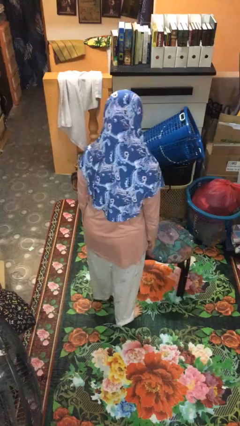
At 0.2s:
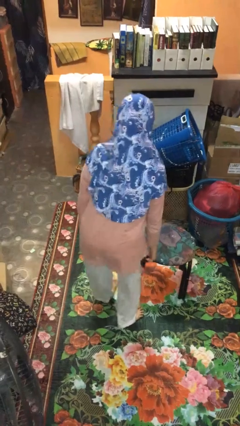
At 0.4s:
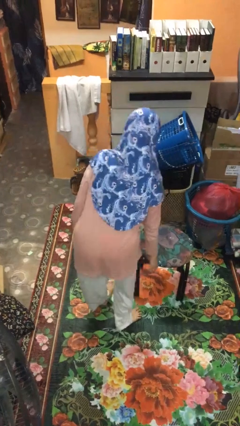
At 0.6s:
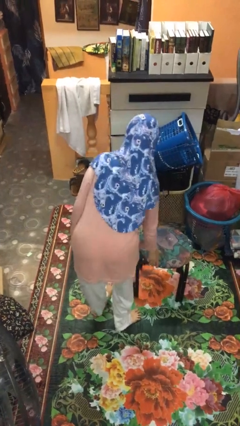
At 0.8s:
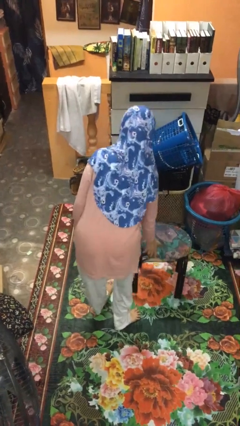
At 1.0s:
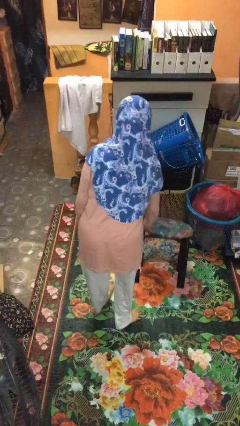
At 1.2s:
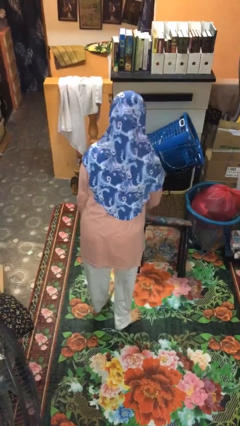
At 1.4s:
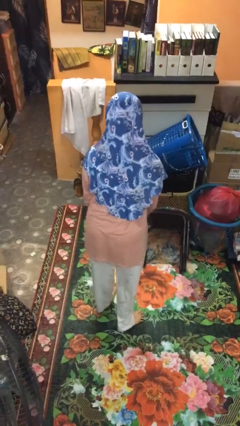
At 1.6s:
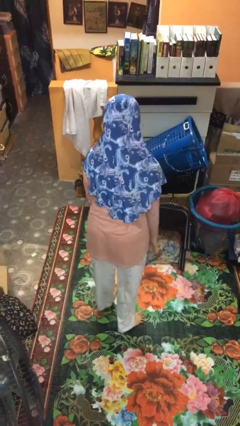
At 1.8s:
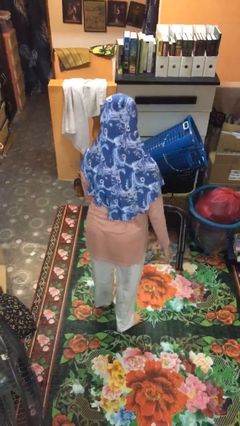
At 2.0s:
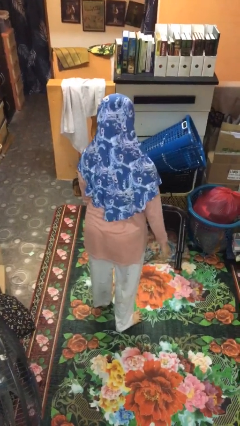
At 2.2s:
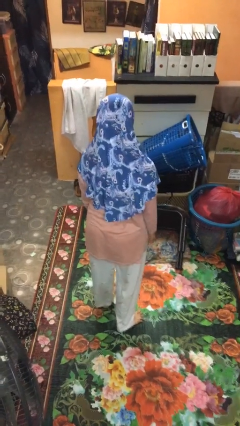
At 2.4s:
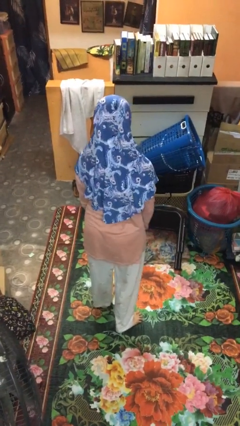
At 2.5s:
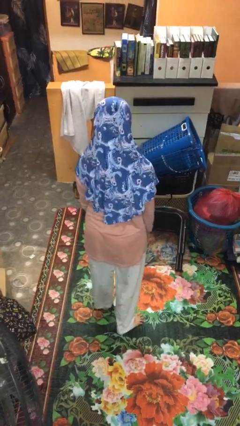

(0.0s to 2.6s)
person knocks over furniture

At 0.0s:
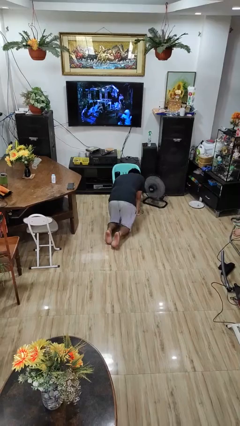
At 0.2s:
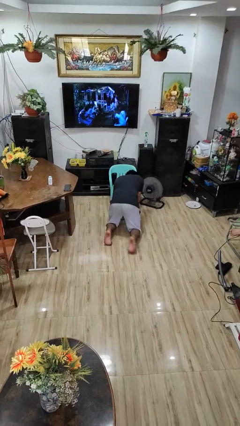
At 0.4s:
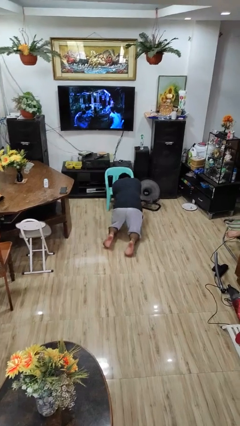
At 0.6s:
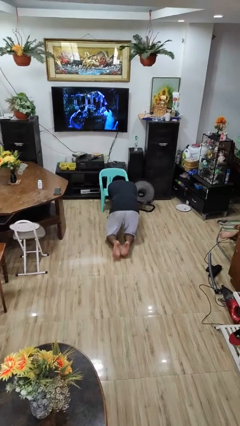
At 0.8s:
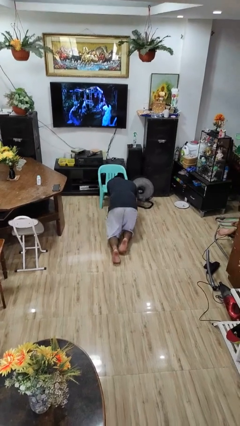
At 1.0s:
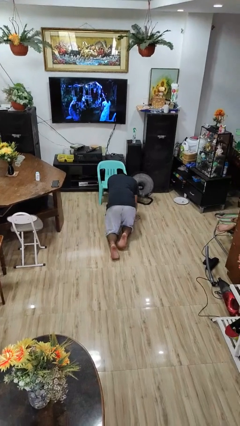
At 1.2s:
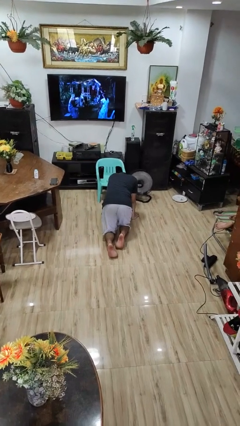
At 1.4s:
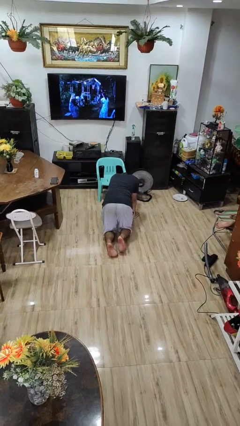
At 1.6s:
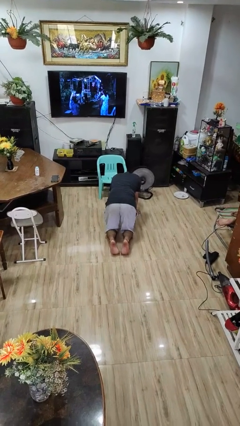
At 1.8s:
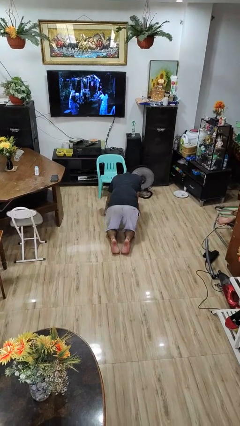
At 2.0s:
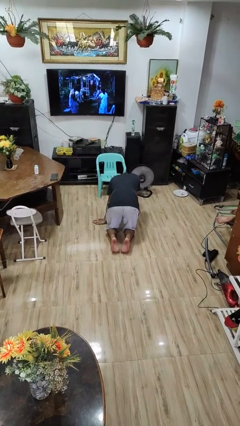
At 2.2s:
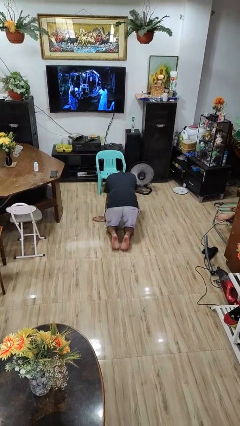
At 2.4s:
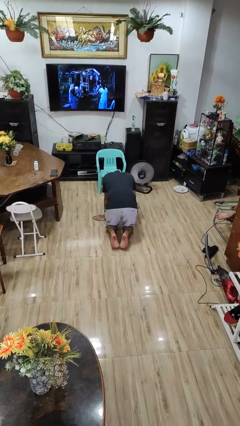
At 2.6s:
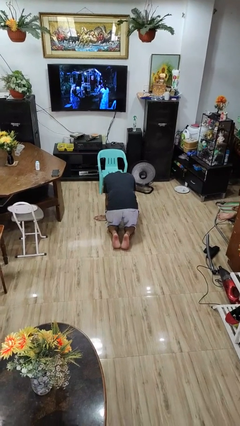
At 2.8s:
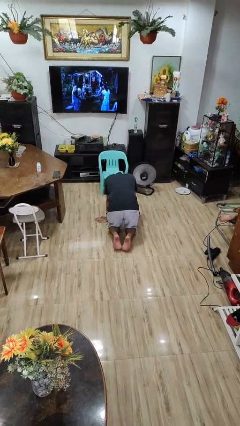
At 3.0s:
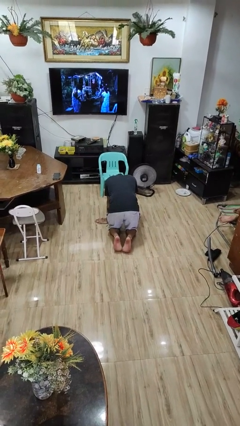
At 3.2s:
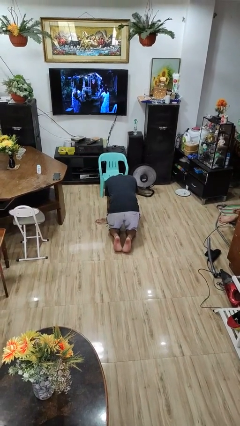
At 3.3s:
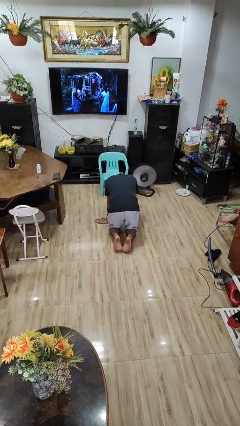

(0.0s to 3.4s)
person crawls

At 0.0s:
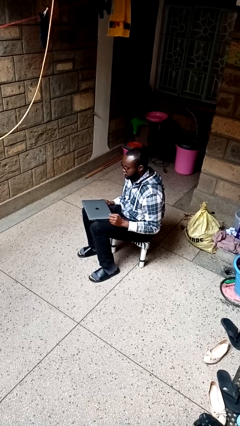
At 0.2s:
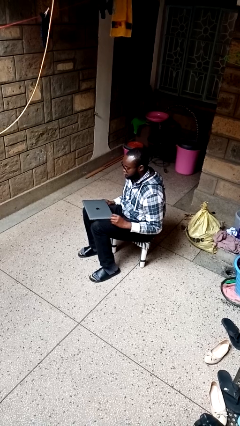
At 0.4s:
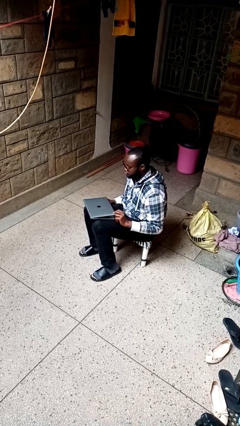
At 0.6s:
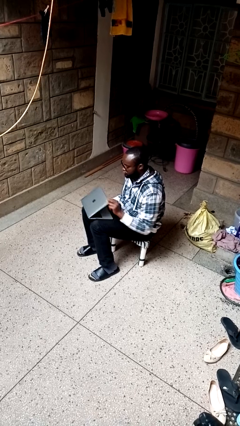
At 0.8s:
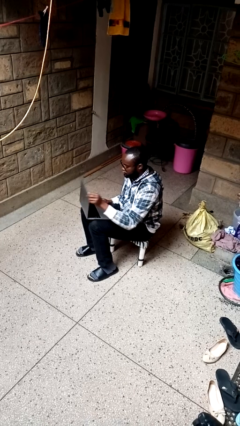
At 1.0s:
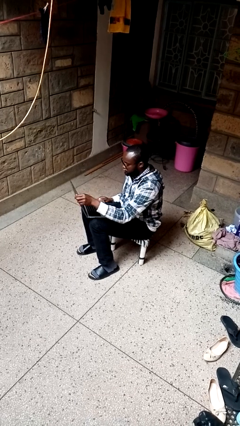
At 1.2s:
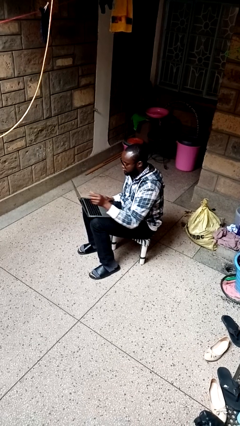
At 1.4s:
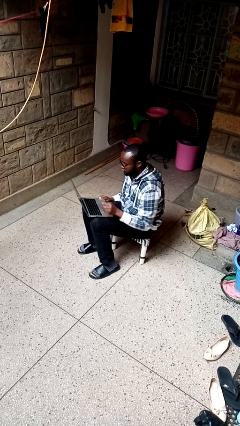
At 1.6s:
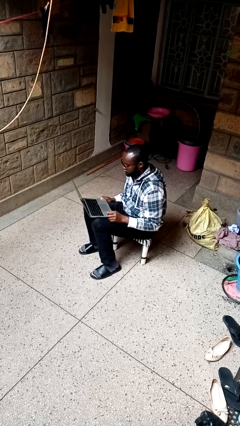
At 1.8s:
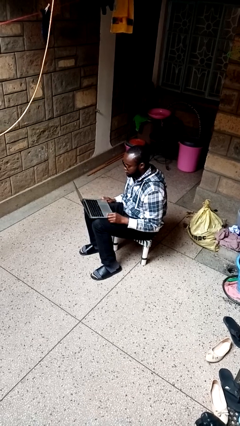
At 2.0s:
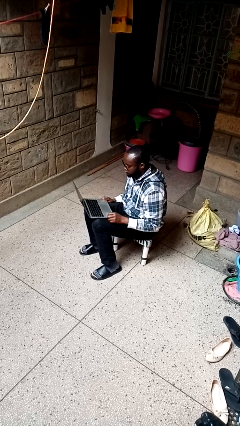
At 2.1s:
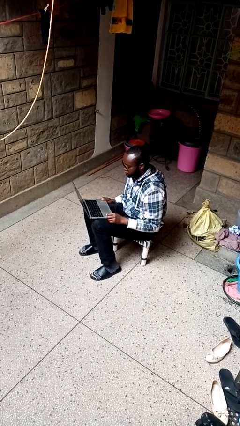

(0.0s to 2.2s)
person opens laptop

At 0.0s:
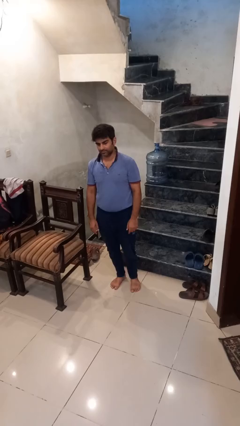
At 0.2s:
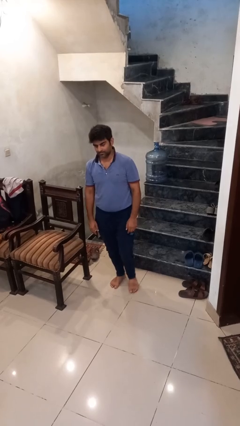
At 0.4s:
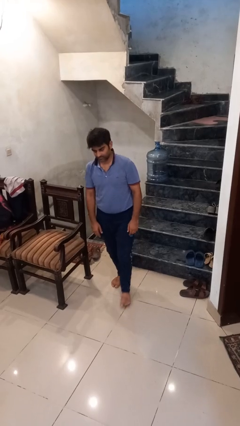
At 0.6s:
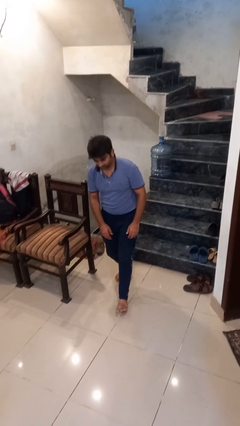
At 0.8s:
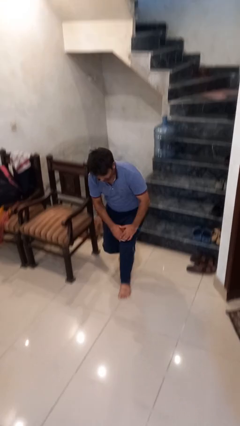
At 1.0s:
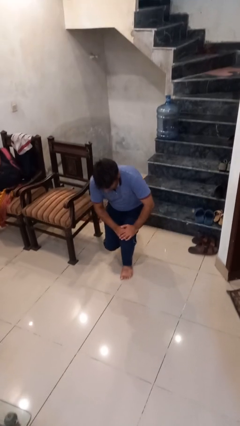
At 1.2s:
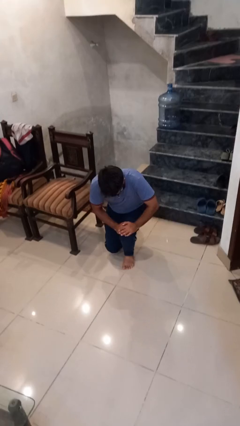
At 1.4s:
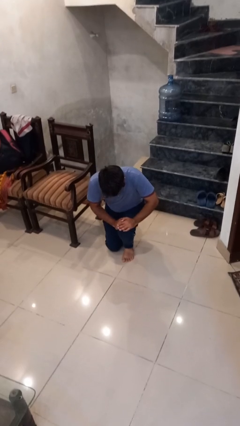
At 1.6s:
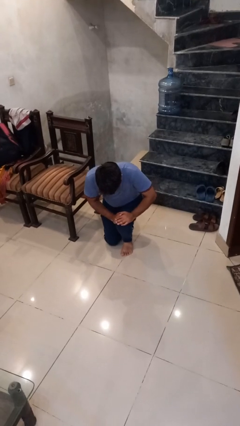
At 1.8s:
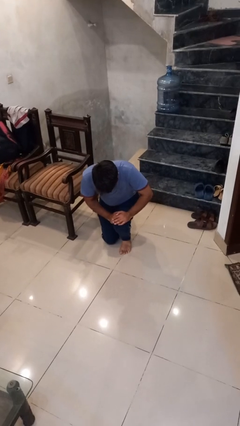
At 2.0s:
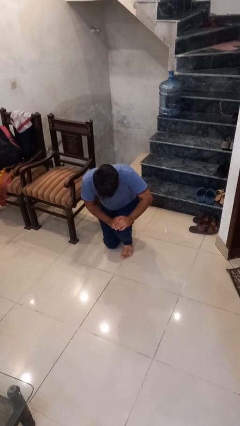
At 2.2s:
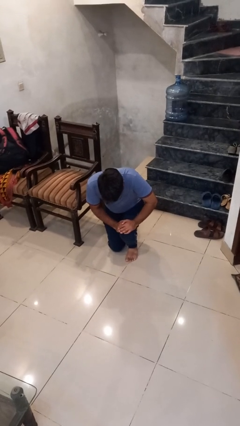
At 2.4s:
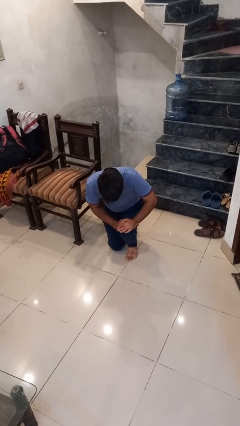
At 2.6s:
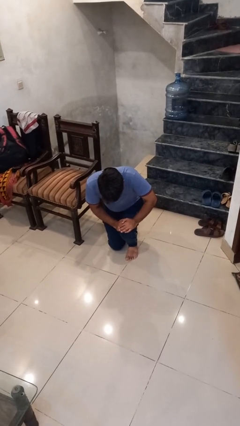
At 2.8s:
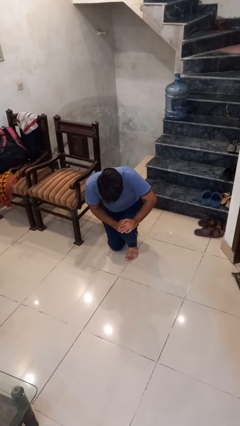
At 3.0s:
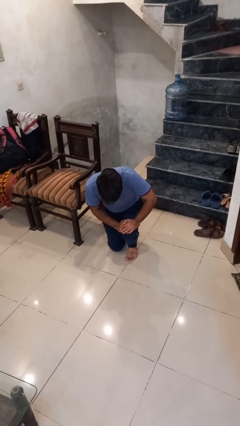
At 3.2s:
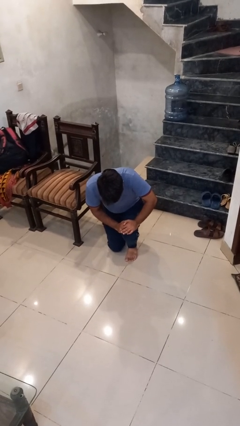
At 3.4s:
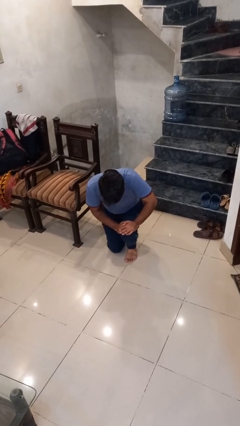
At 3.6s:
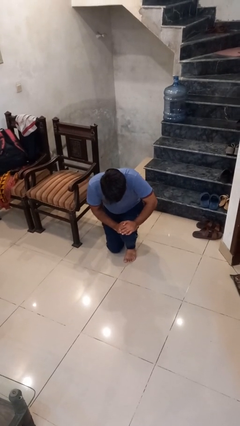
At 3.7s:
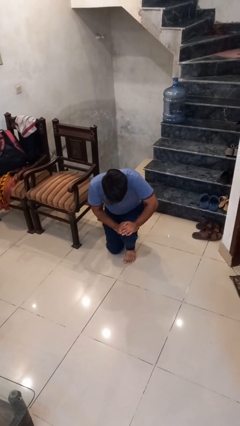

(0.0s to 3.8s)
person kneels

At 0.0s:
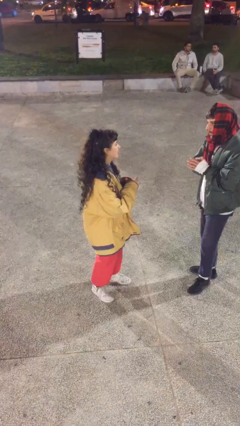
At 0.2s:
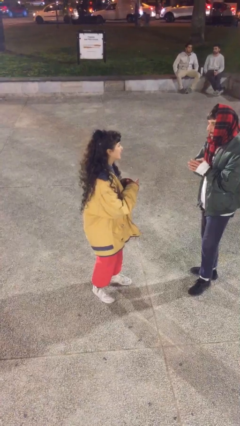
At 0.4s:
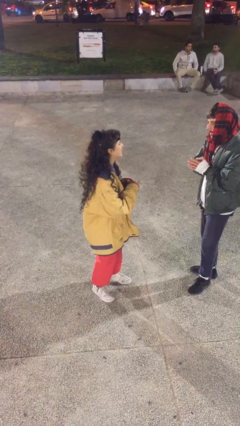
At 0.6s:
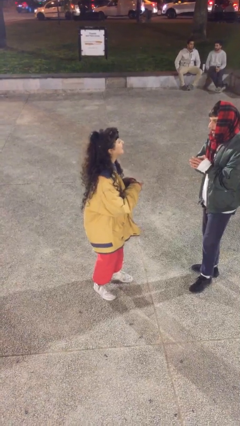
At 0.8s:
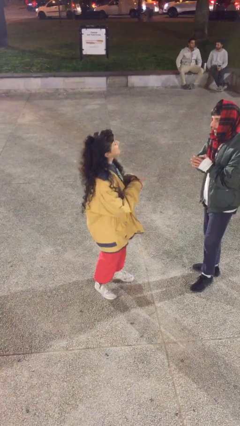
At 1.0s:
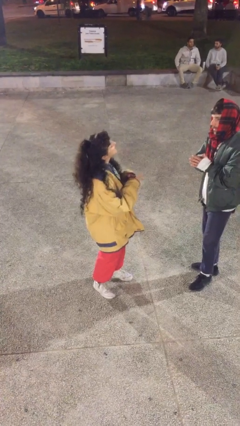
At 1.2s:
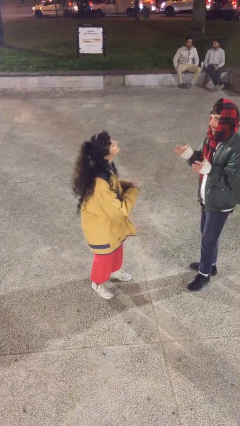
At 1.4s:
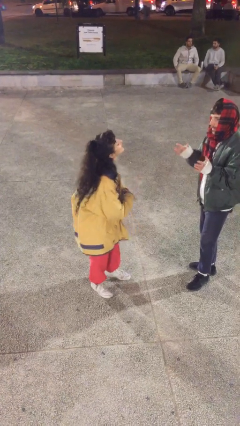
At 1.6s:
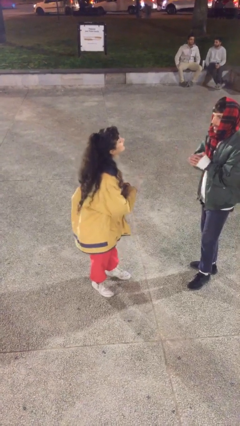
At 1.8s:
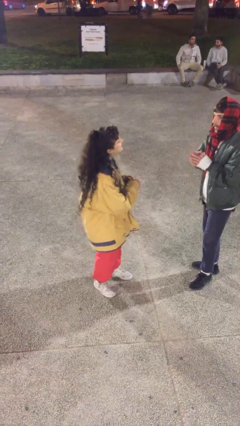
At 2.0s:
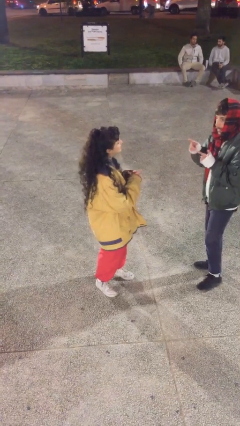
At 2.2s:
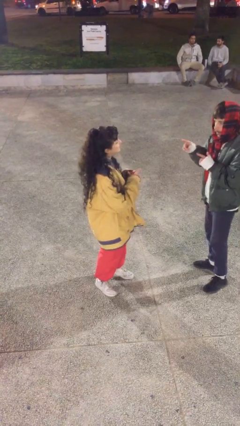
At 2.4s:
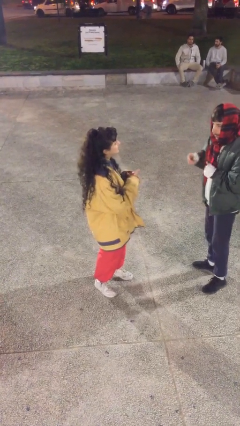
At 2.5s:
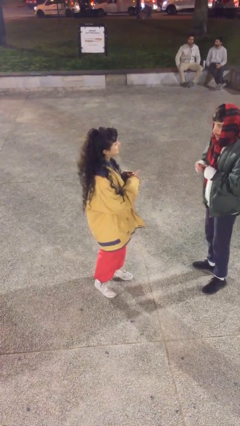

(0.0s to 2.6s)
person talks to person

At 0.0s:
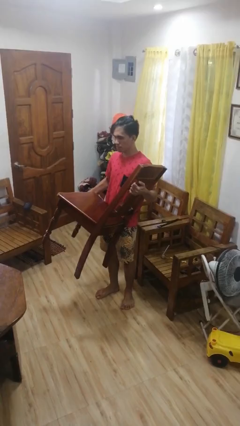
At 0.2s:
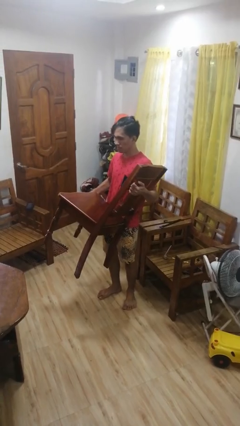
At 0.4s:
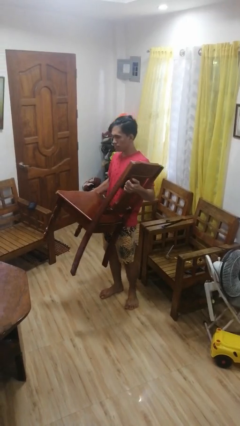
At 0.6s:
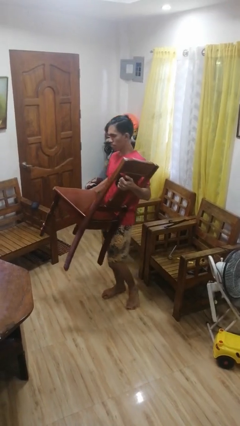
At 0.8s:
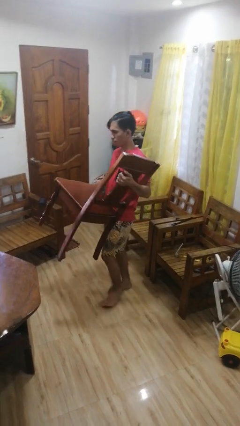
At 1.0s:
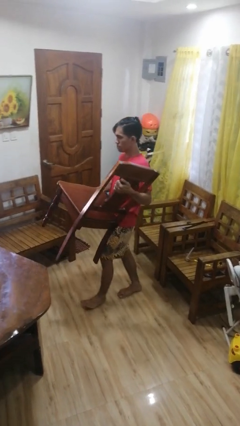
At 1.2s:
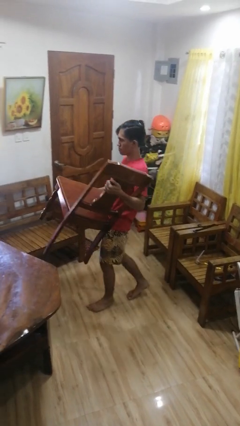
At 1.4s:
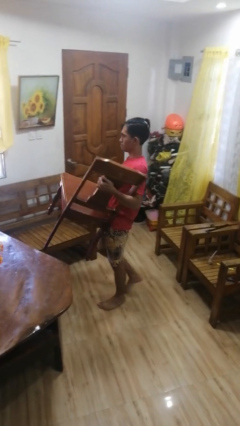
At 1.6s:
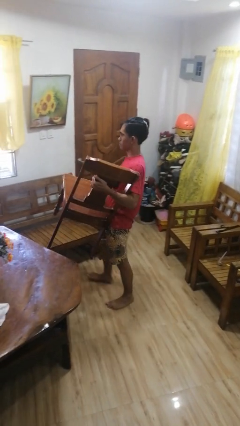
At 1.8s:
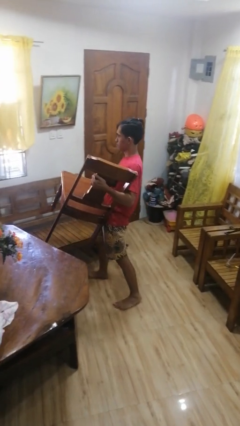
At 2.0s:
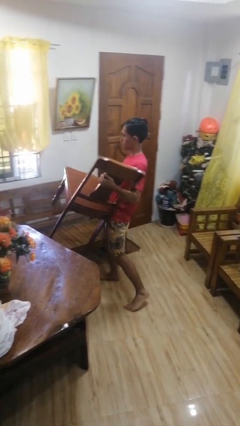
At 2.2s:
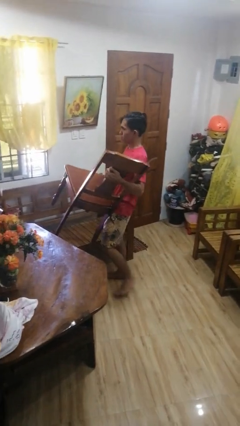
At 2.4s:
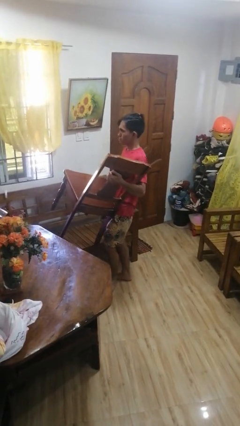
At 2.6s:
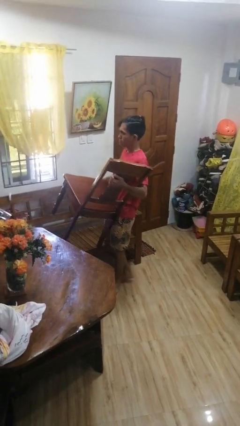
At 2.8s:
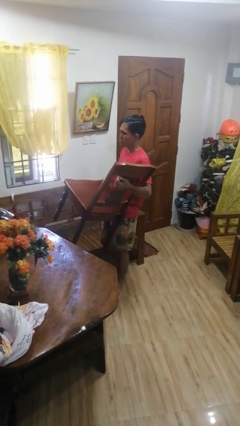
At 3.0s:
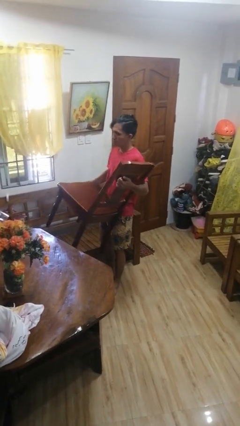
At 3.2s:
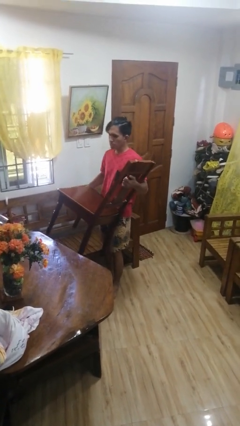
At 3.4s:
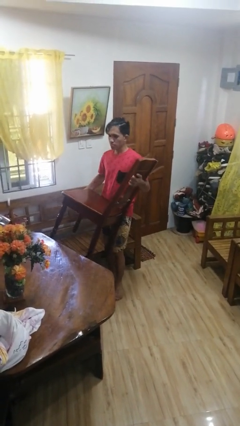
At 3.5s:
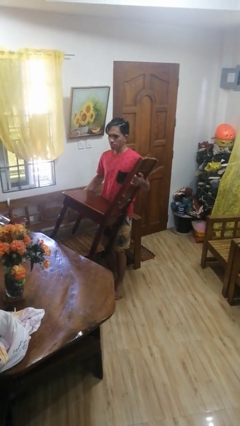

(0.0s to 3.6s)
person carries furniture
